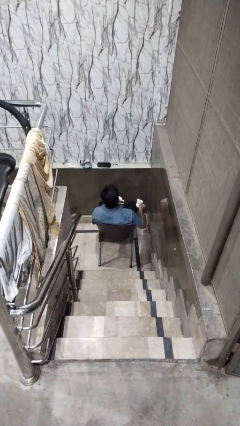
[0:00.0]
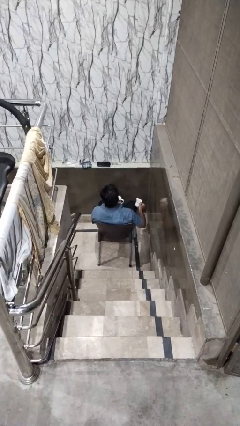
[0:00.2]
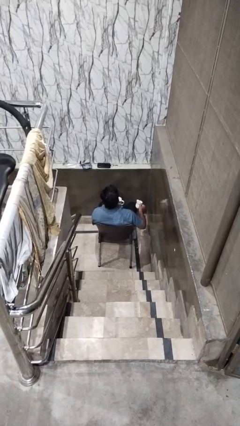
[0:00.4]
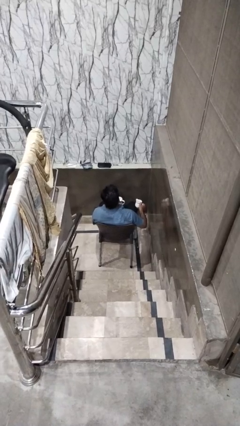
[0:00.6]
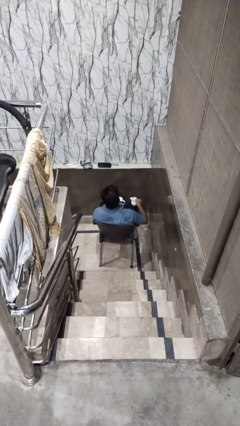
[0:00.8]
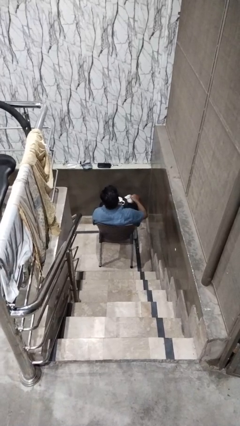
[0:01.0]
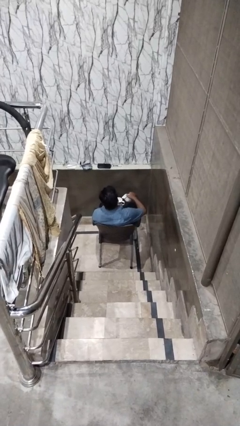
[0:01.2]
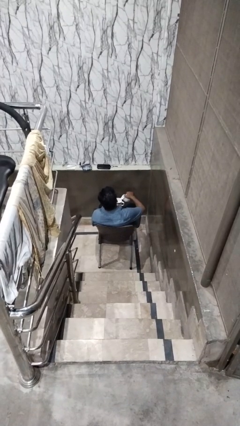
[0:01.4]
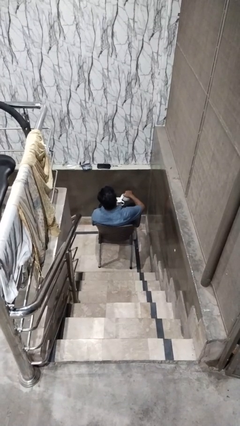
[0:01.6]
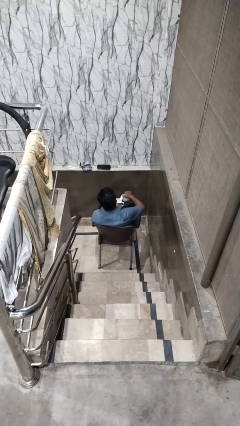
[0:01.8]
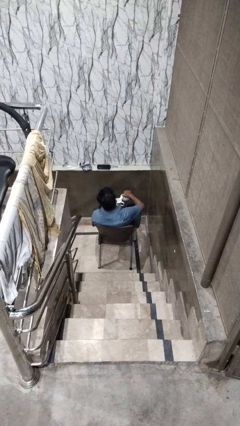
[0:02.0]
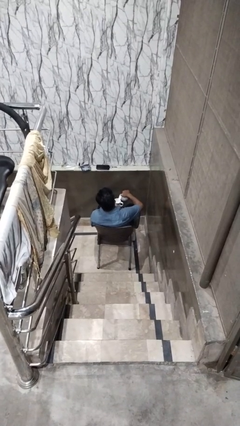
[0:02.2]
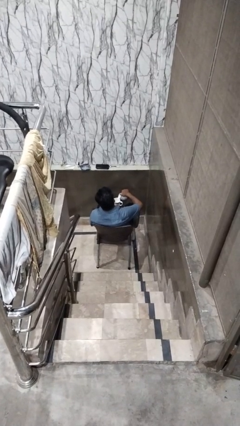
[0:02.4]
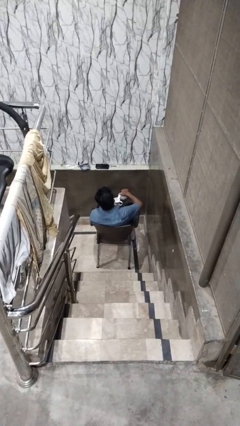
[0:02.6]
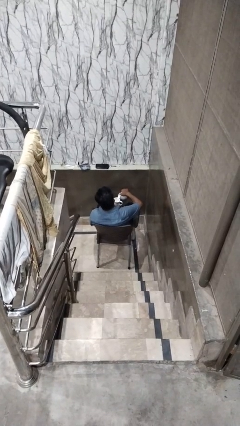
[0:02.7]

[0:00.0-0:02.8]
person pours coffee into mug

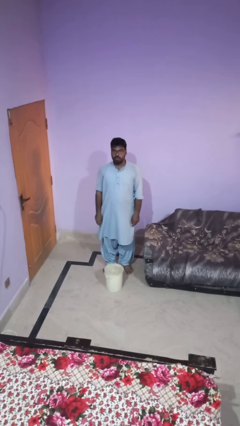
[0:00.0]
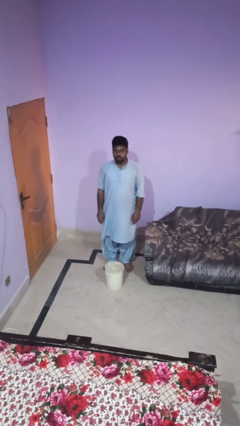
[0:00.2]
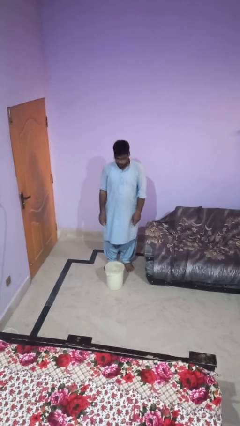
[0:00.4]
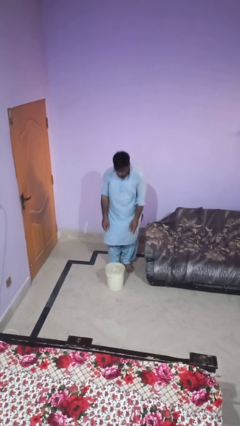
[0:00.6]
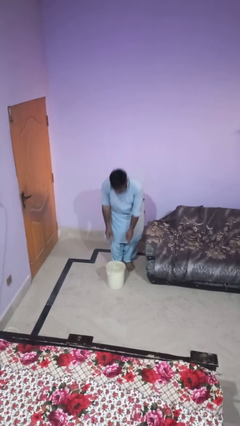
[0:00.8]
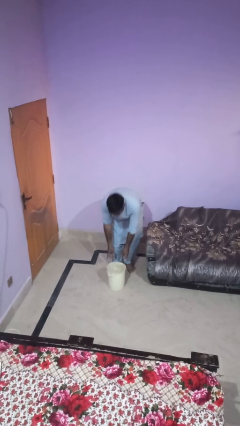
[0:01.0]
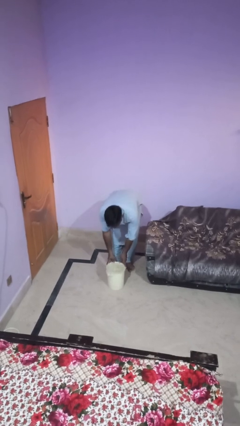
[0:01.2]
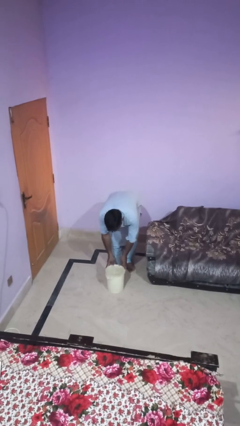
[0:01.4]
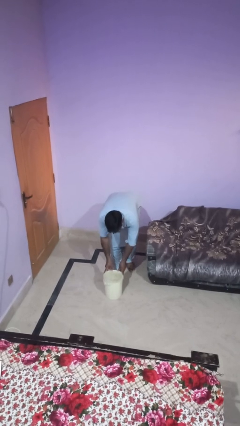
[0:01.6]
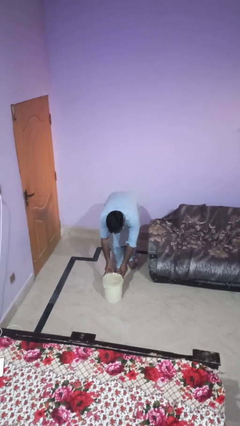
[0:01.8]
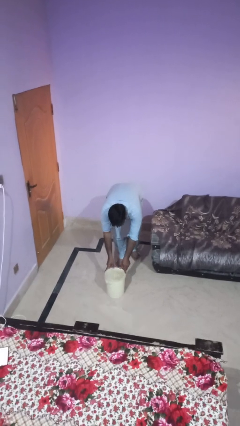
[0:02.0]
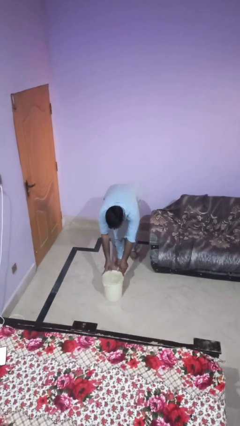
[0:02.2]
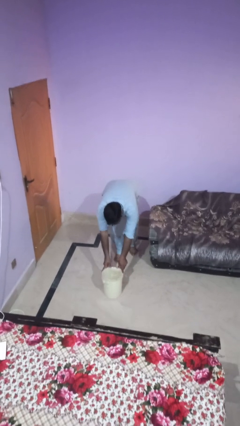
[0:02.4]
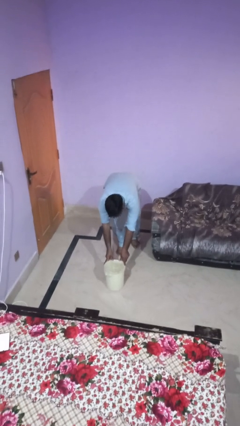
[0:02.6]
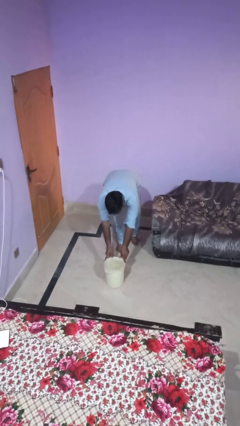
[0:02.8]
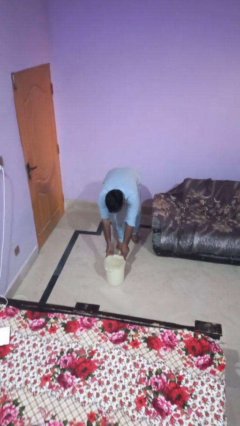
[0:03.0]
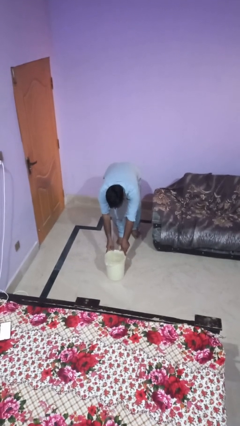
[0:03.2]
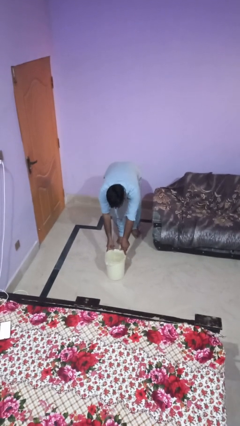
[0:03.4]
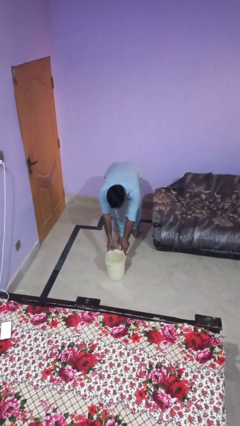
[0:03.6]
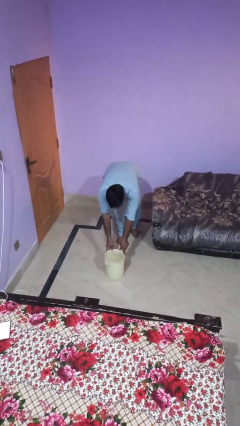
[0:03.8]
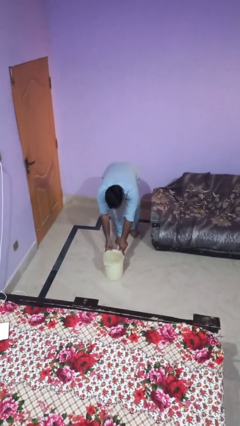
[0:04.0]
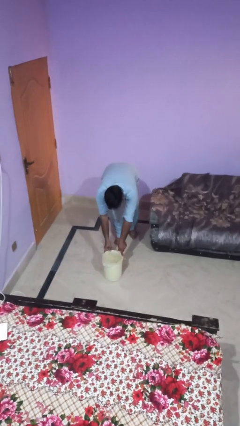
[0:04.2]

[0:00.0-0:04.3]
person pushes wheeled trashcan

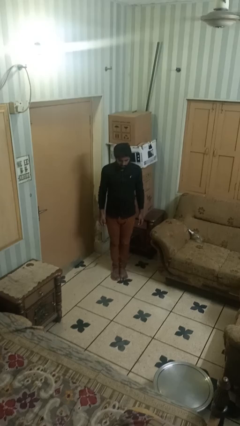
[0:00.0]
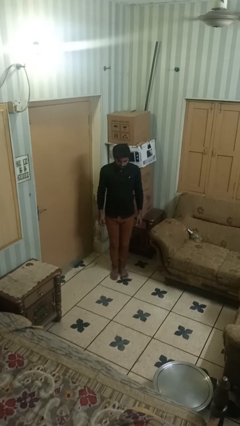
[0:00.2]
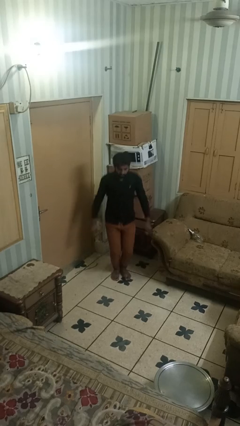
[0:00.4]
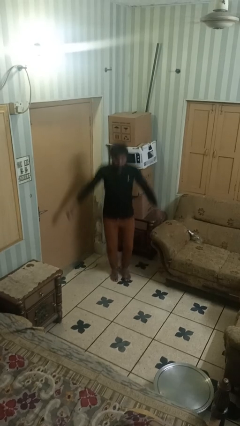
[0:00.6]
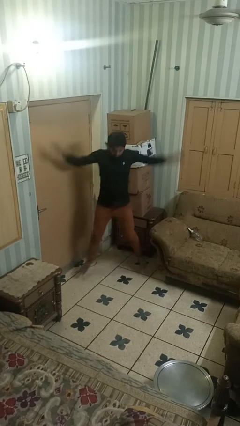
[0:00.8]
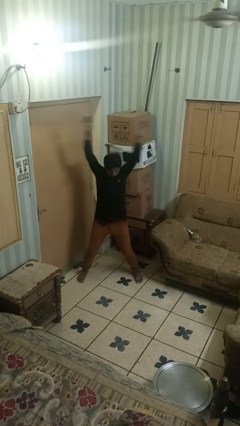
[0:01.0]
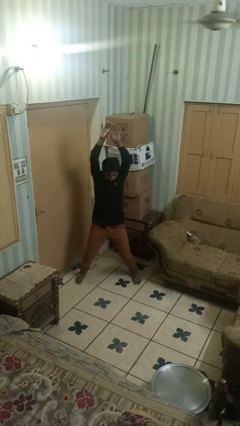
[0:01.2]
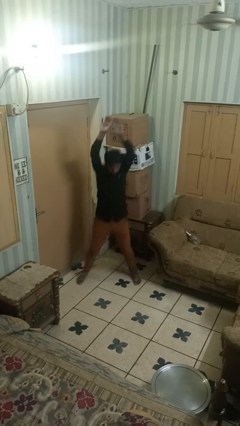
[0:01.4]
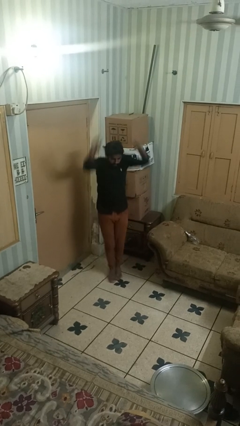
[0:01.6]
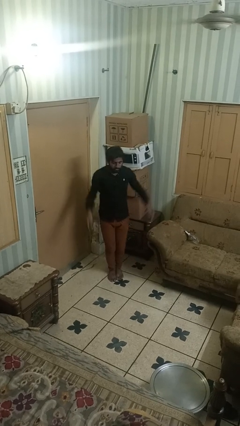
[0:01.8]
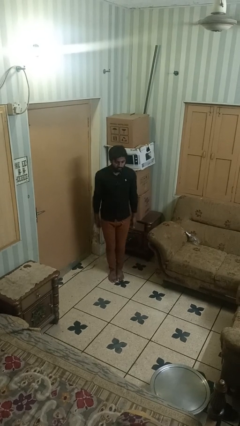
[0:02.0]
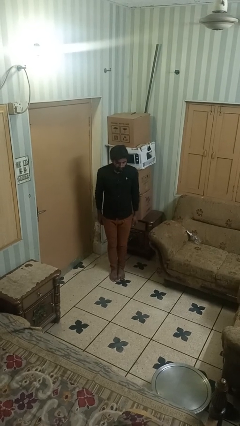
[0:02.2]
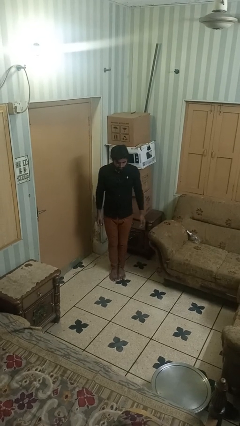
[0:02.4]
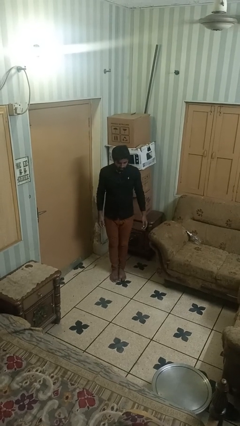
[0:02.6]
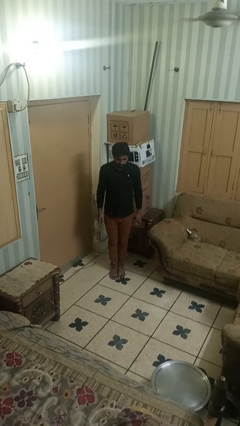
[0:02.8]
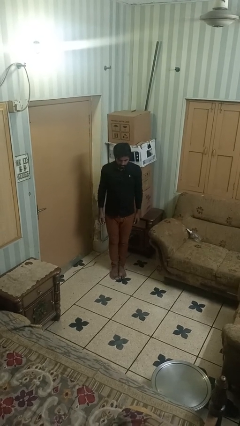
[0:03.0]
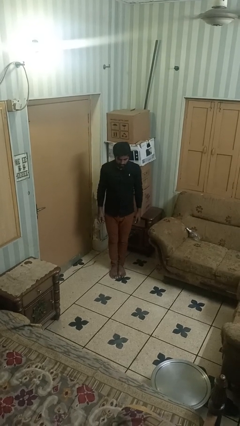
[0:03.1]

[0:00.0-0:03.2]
person exercises with jumping jacks

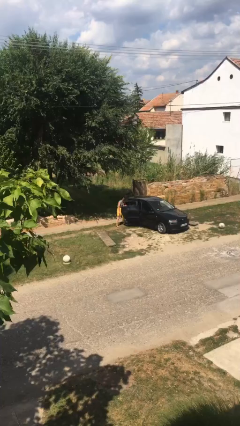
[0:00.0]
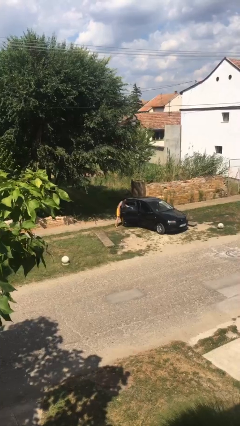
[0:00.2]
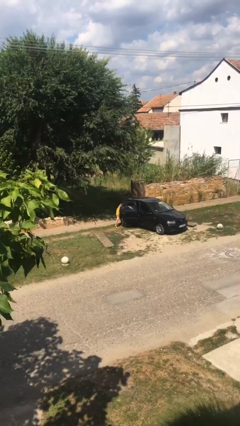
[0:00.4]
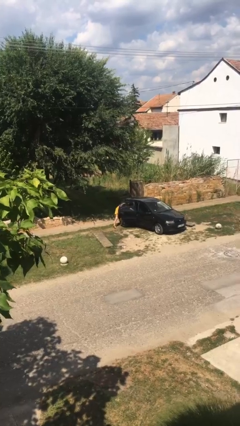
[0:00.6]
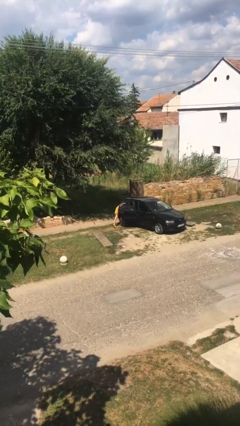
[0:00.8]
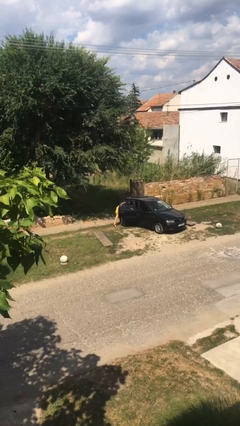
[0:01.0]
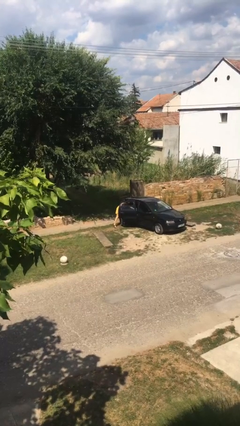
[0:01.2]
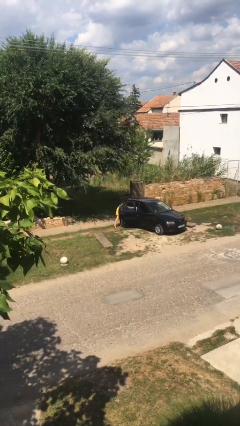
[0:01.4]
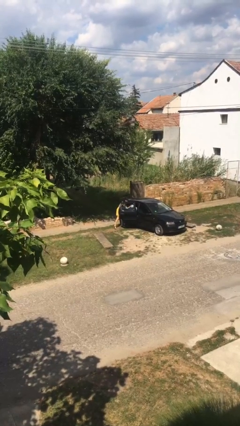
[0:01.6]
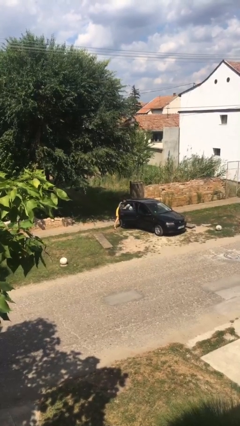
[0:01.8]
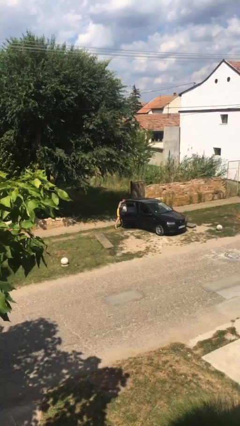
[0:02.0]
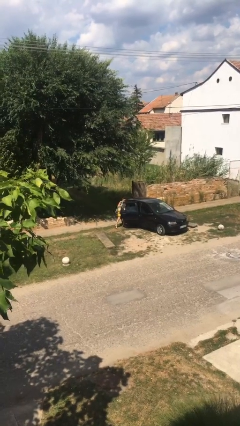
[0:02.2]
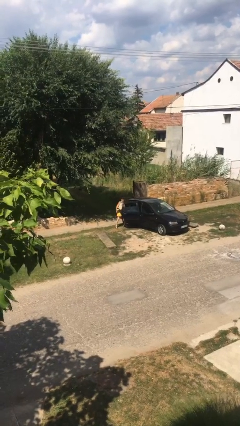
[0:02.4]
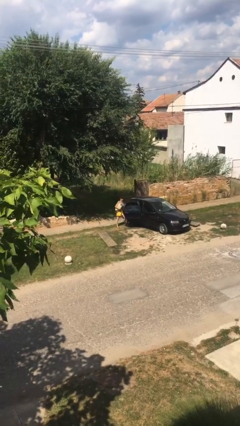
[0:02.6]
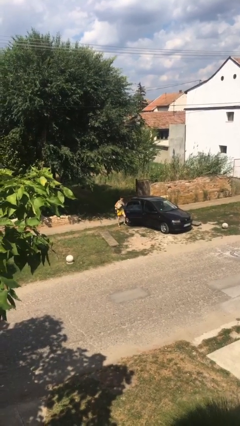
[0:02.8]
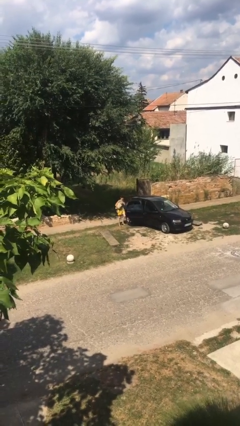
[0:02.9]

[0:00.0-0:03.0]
person unloads car

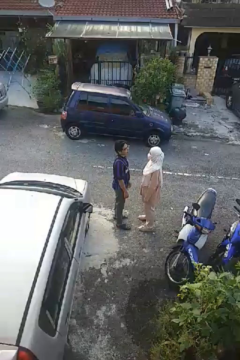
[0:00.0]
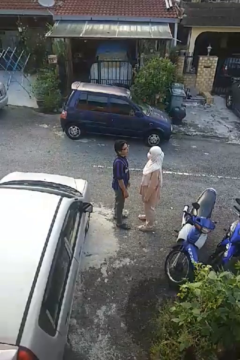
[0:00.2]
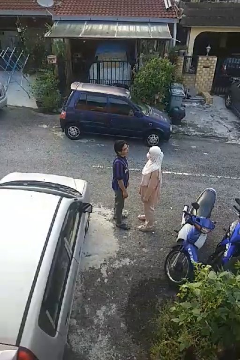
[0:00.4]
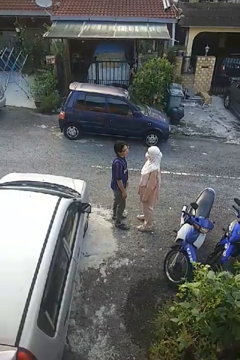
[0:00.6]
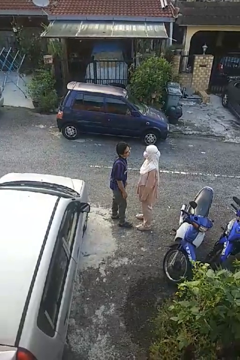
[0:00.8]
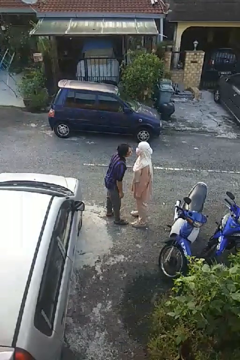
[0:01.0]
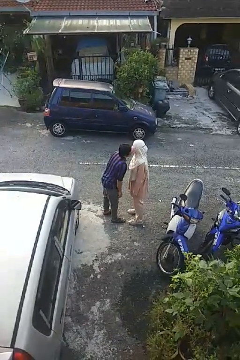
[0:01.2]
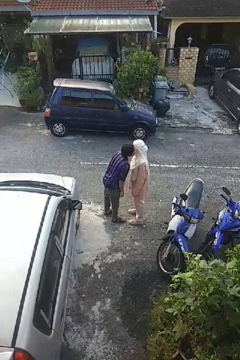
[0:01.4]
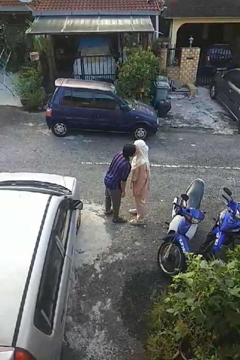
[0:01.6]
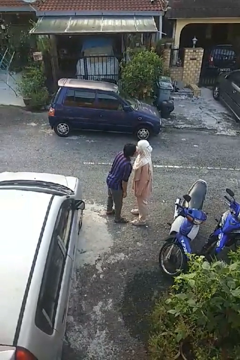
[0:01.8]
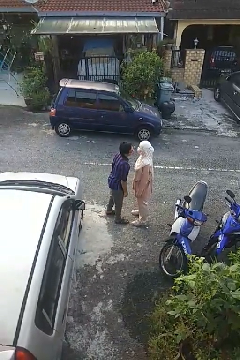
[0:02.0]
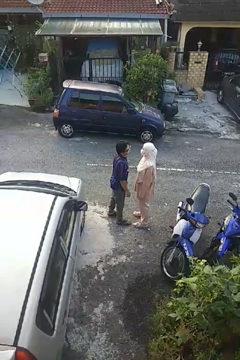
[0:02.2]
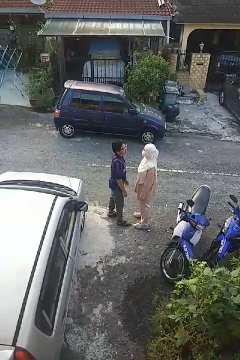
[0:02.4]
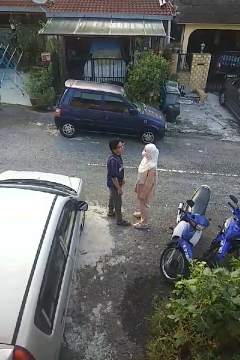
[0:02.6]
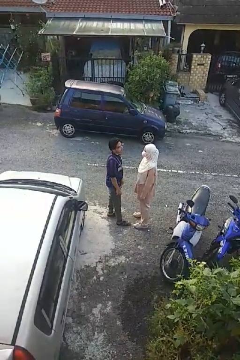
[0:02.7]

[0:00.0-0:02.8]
person kisses cheek of person

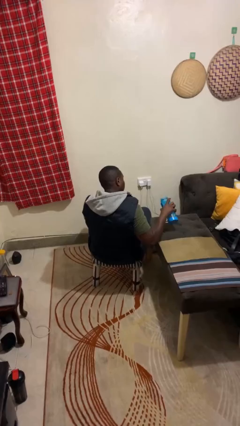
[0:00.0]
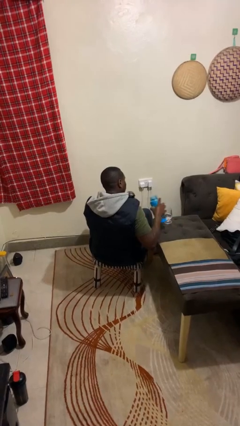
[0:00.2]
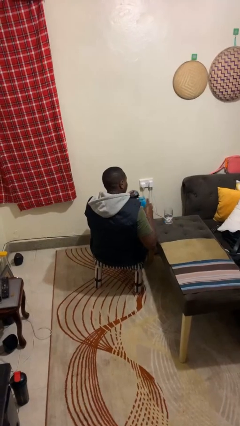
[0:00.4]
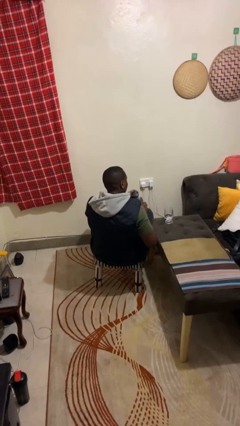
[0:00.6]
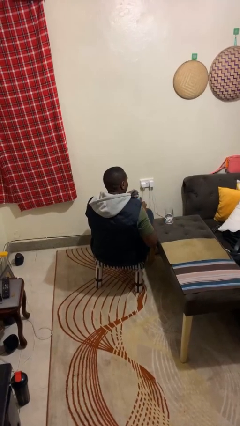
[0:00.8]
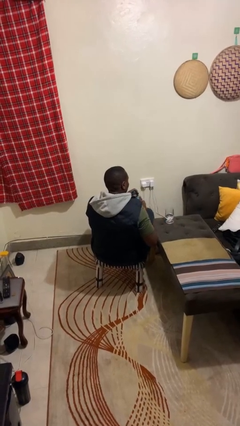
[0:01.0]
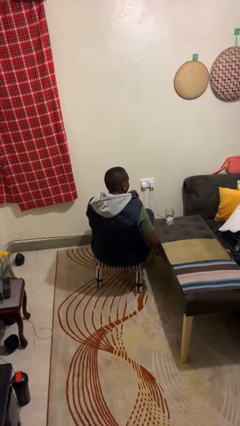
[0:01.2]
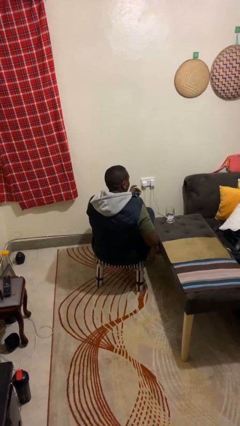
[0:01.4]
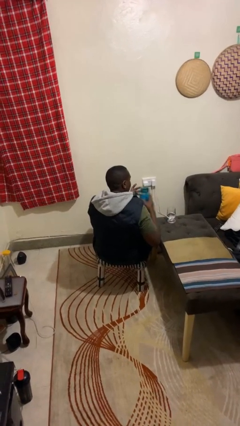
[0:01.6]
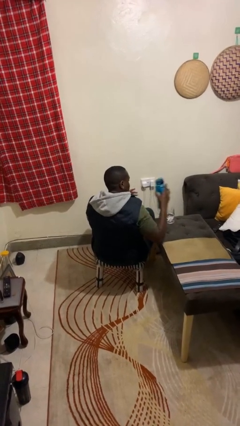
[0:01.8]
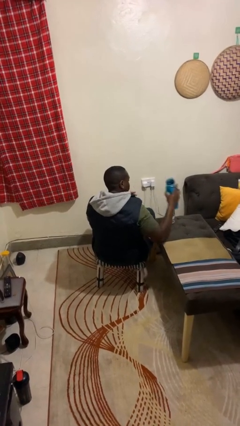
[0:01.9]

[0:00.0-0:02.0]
person screws lid to bottle
